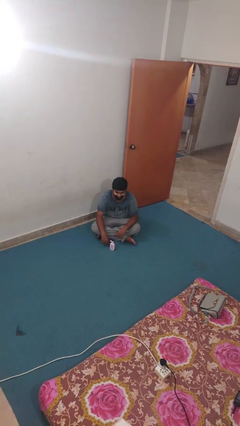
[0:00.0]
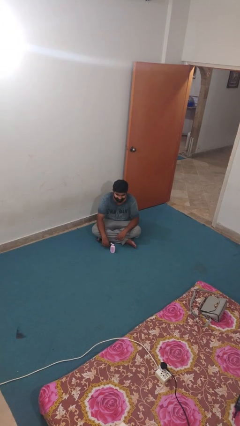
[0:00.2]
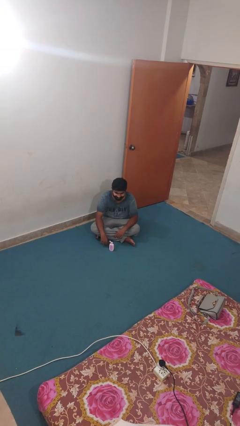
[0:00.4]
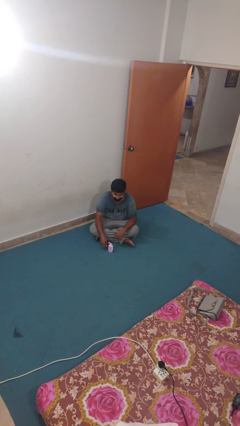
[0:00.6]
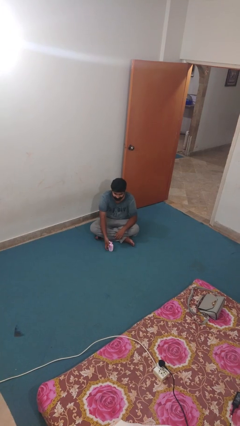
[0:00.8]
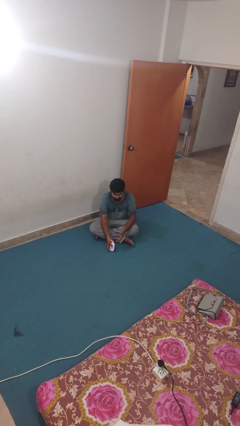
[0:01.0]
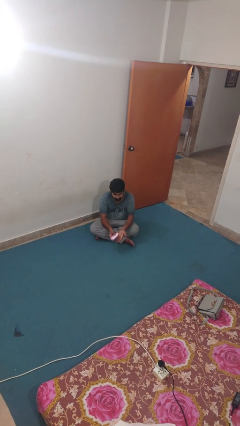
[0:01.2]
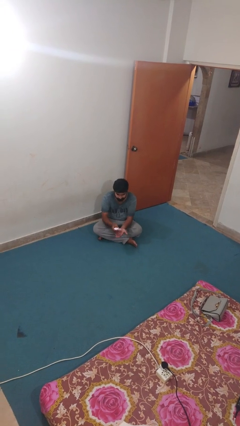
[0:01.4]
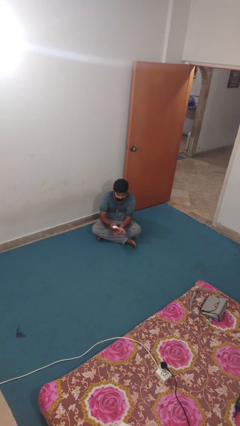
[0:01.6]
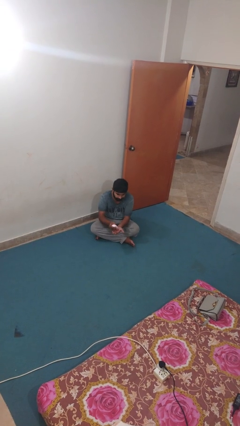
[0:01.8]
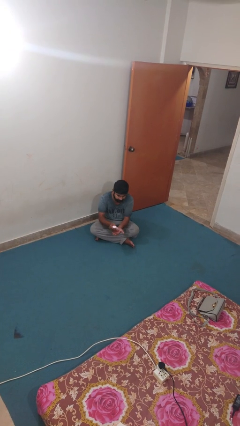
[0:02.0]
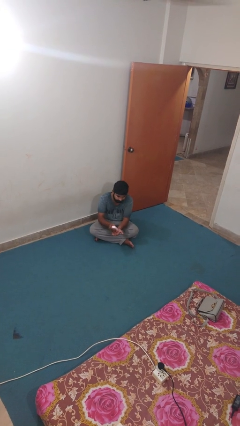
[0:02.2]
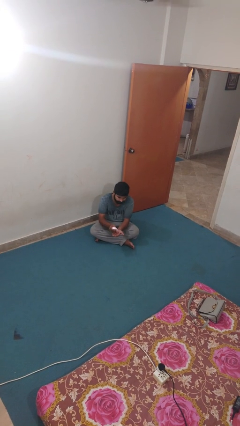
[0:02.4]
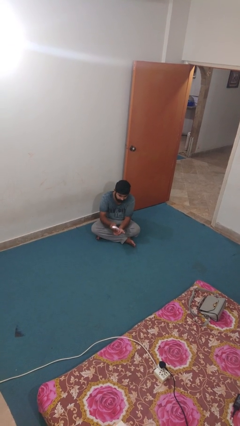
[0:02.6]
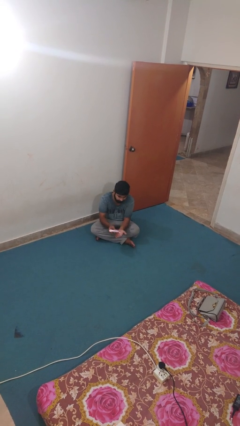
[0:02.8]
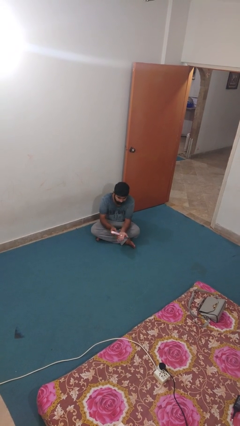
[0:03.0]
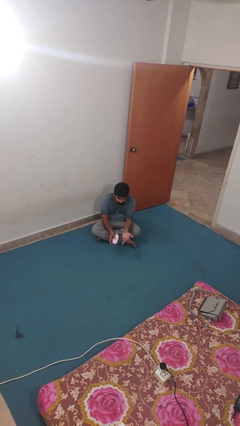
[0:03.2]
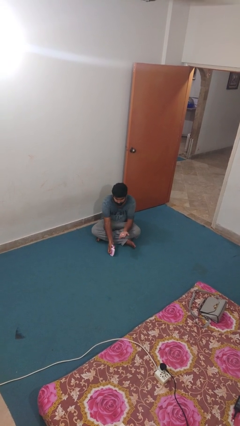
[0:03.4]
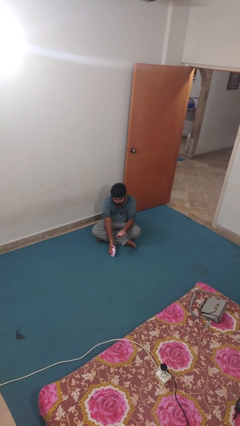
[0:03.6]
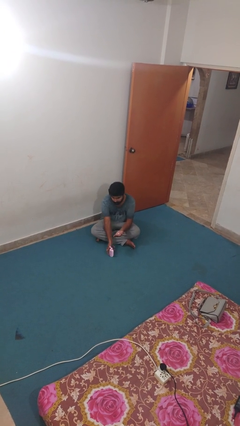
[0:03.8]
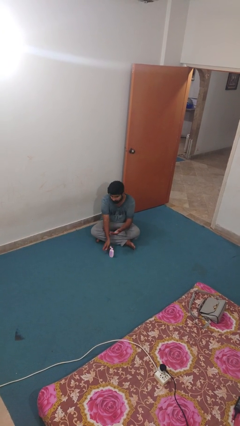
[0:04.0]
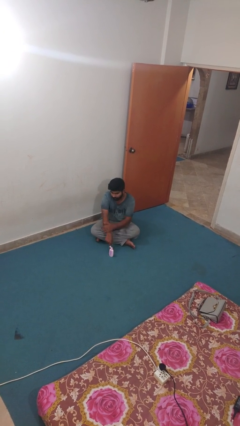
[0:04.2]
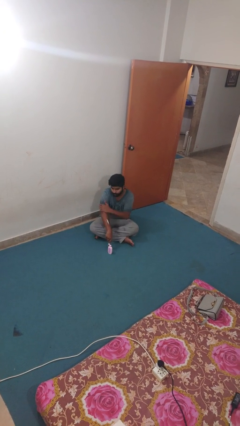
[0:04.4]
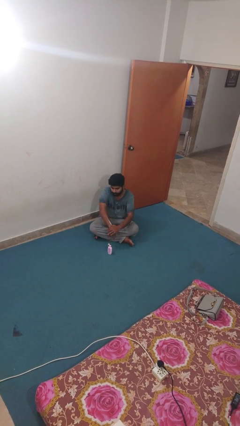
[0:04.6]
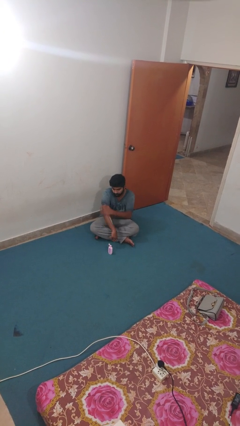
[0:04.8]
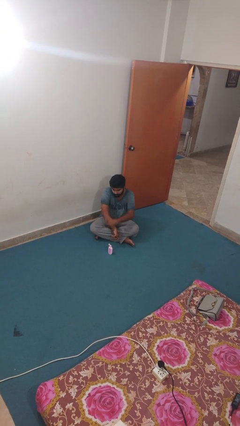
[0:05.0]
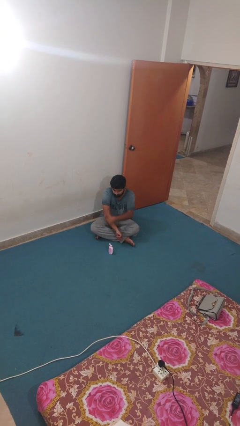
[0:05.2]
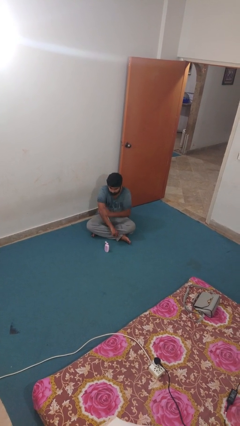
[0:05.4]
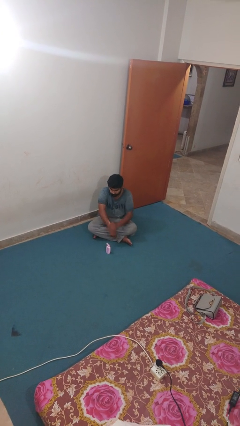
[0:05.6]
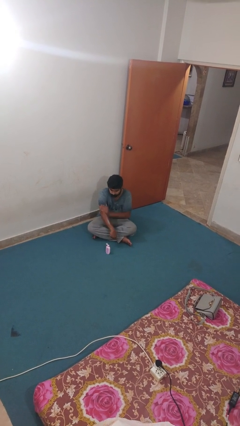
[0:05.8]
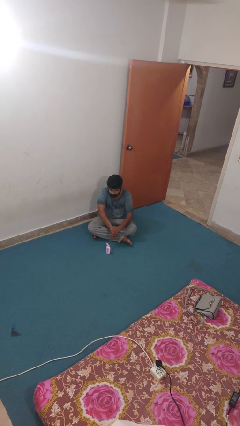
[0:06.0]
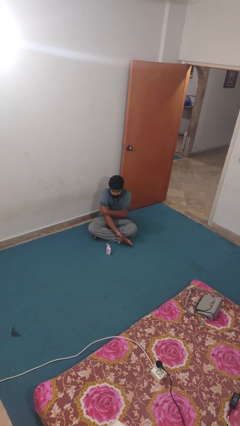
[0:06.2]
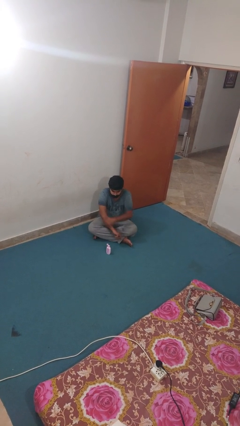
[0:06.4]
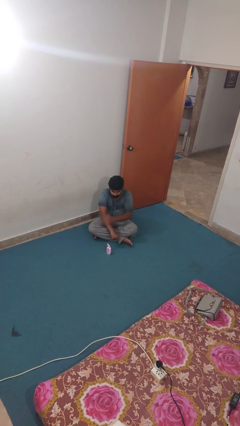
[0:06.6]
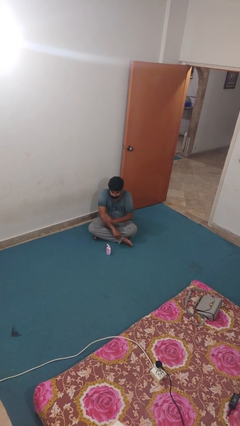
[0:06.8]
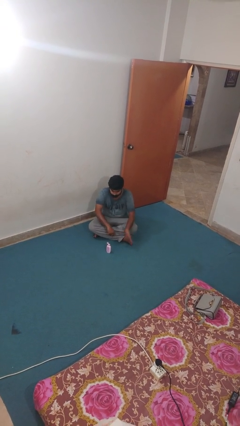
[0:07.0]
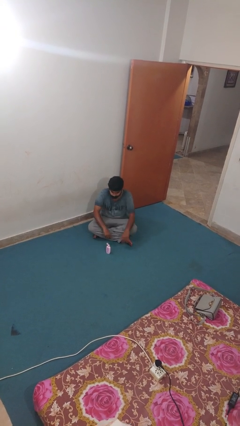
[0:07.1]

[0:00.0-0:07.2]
person applies sunscreen

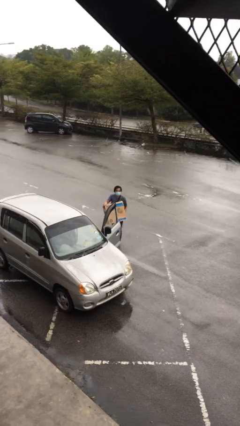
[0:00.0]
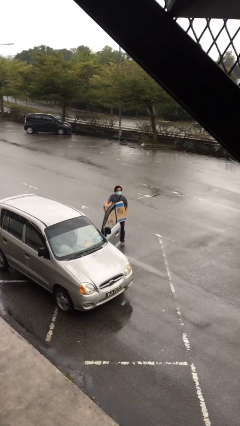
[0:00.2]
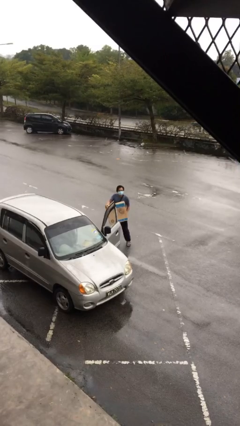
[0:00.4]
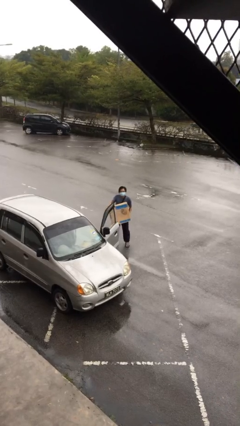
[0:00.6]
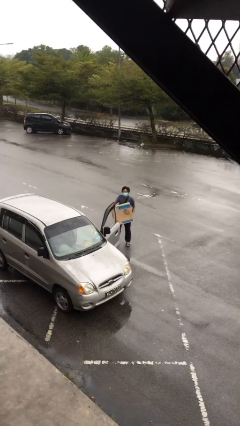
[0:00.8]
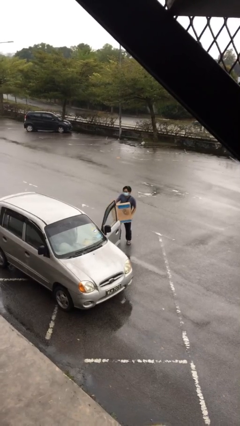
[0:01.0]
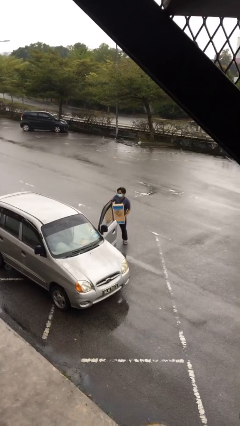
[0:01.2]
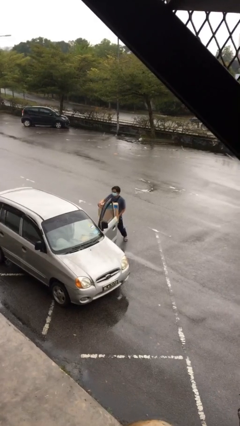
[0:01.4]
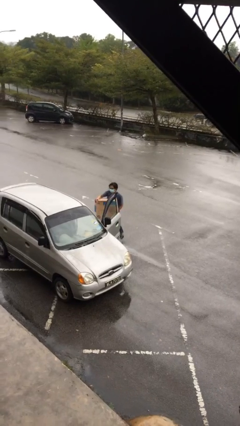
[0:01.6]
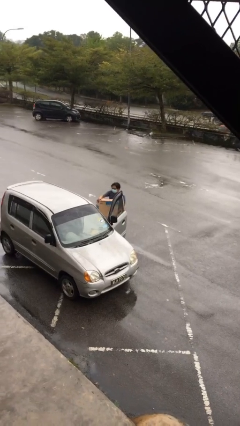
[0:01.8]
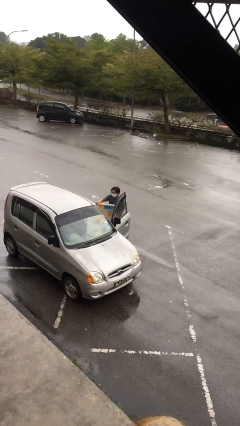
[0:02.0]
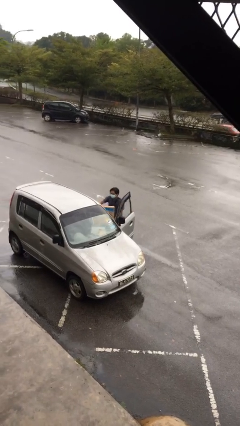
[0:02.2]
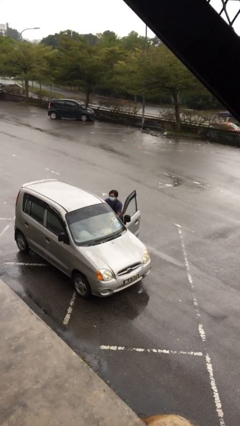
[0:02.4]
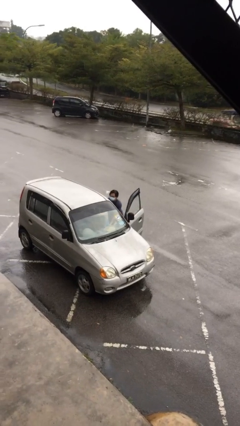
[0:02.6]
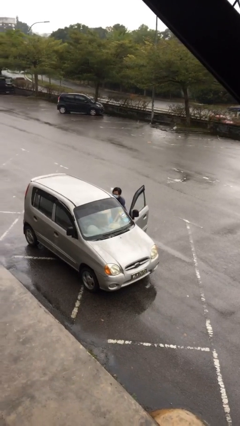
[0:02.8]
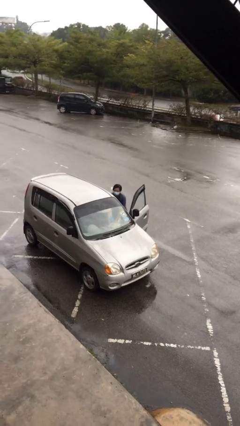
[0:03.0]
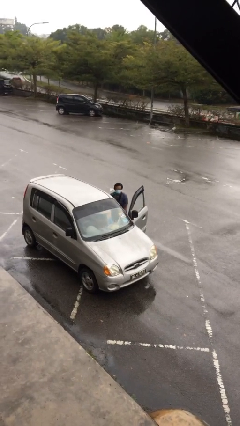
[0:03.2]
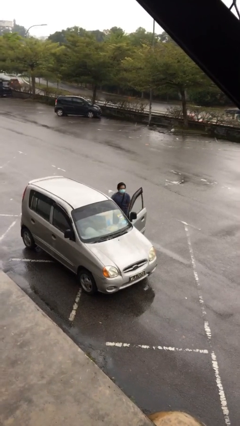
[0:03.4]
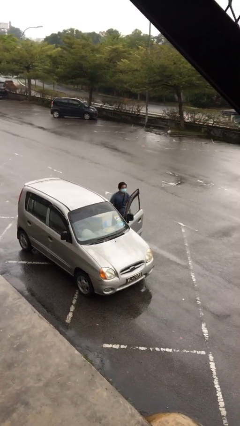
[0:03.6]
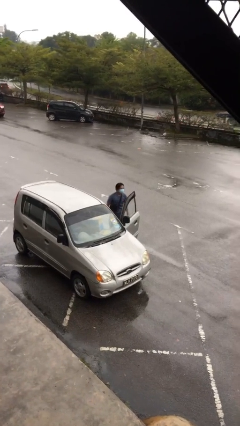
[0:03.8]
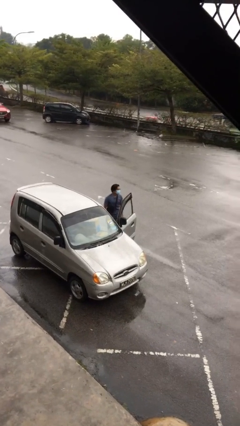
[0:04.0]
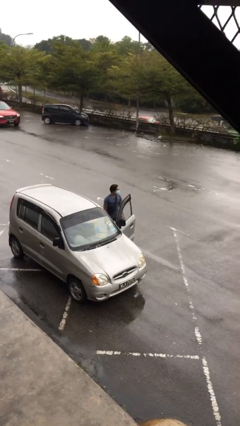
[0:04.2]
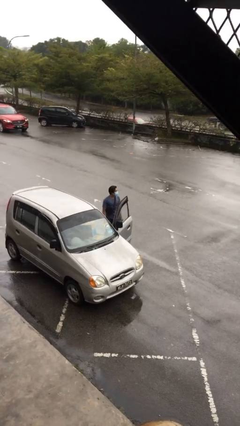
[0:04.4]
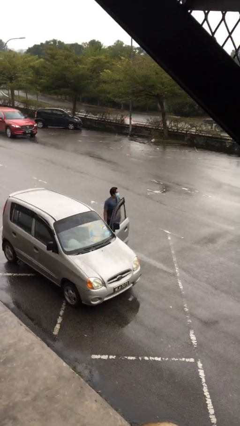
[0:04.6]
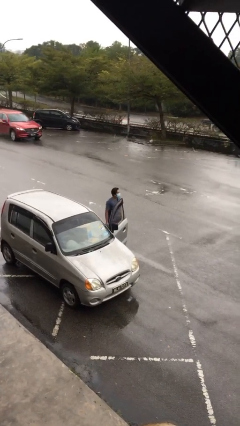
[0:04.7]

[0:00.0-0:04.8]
person loads car

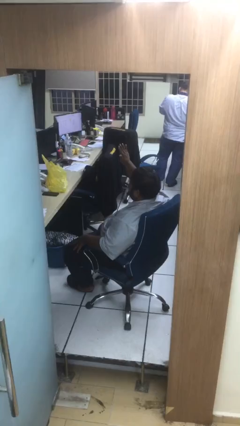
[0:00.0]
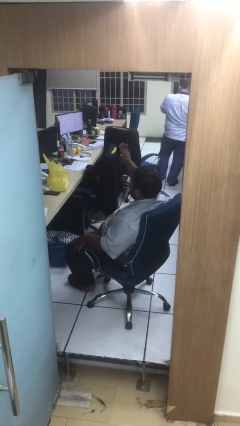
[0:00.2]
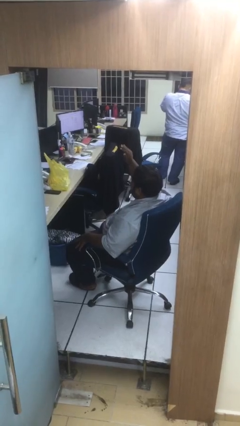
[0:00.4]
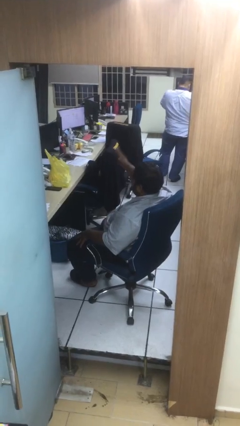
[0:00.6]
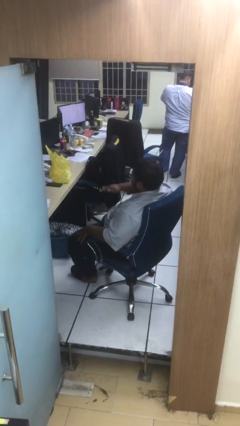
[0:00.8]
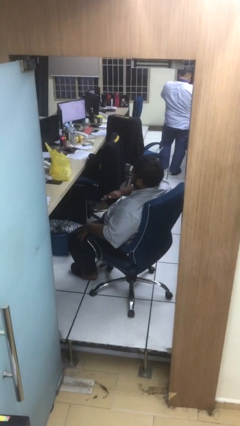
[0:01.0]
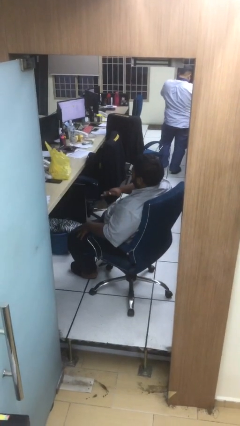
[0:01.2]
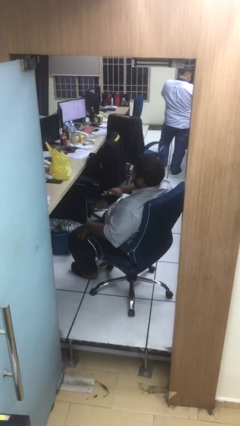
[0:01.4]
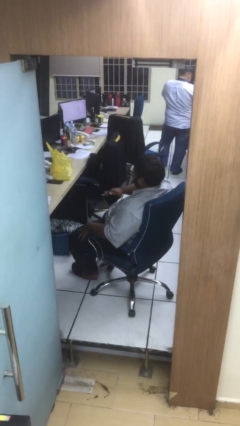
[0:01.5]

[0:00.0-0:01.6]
person gestures swipe down

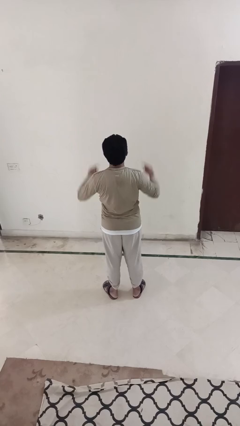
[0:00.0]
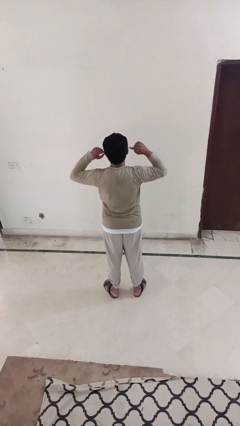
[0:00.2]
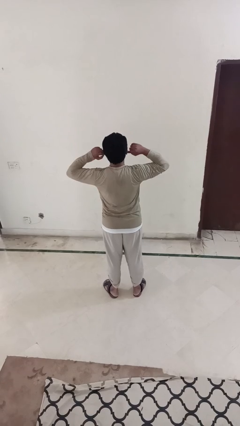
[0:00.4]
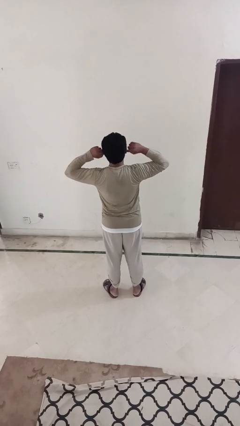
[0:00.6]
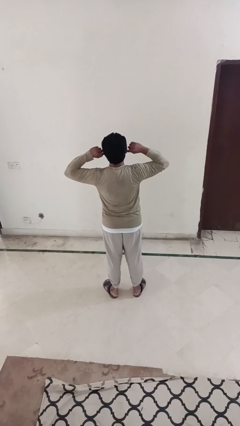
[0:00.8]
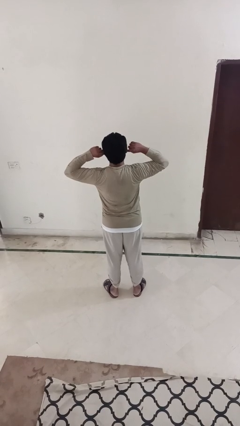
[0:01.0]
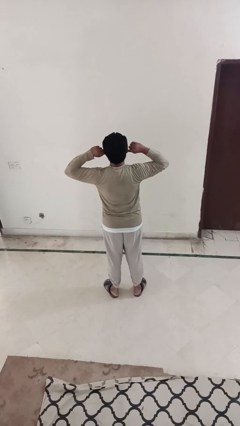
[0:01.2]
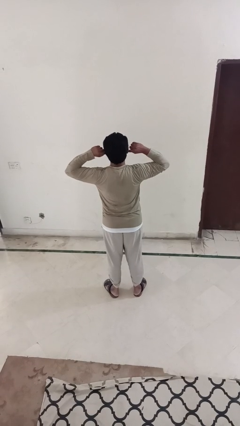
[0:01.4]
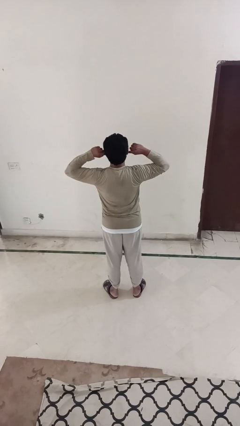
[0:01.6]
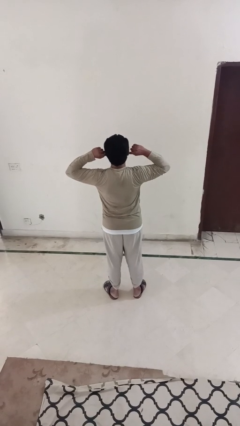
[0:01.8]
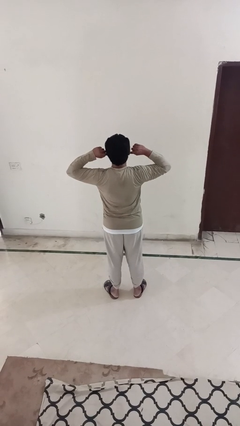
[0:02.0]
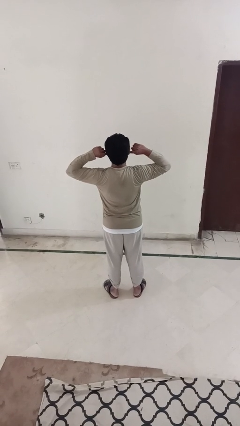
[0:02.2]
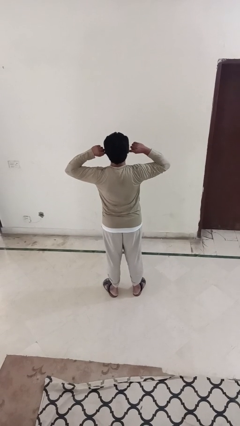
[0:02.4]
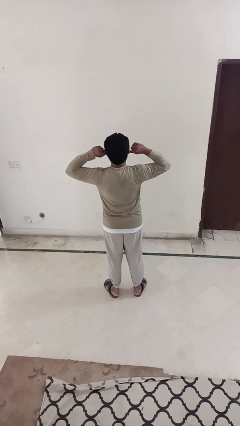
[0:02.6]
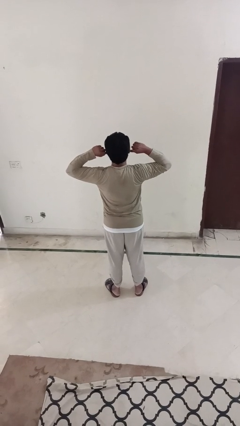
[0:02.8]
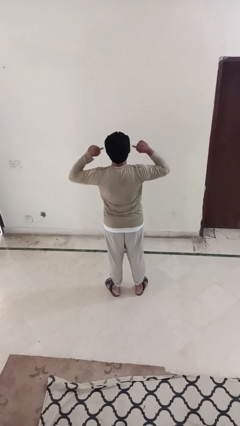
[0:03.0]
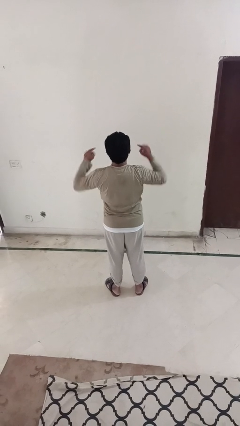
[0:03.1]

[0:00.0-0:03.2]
person puts fingers in ear

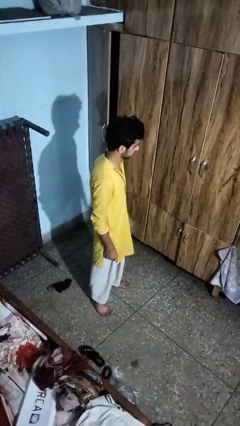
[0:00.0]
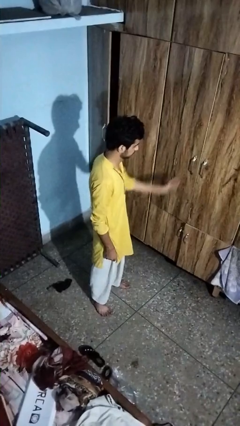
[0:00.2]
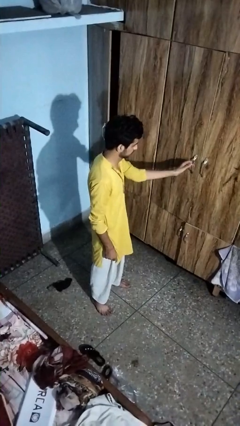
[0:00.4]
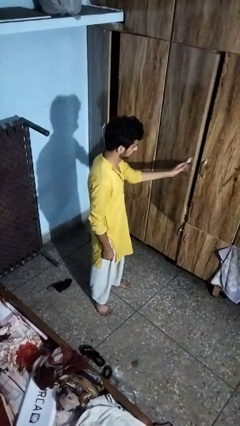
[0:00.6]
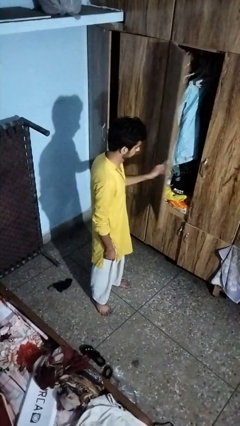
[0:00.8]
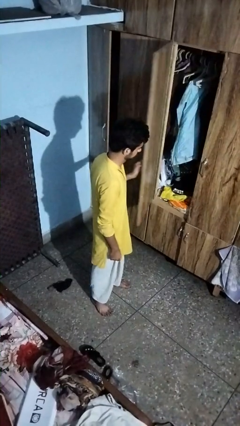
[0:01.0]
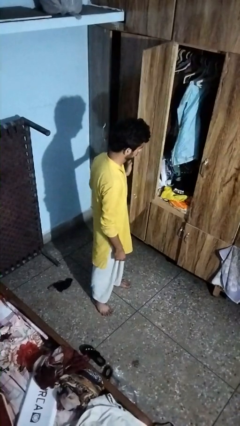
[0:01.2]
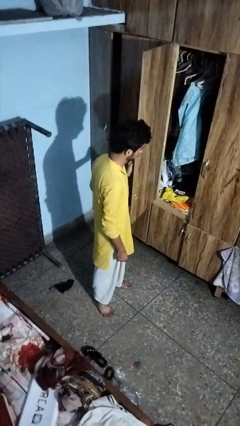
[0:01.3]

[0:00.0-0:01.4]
person opens closet door
